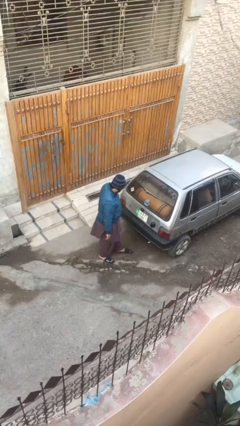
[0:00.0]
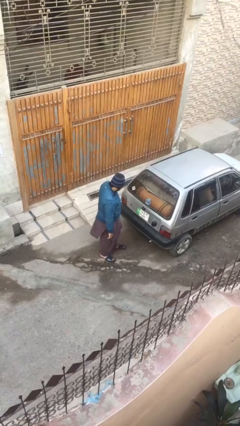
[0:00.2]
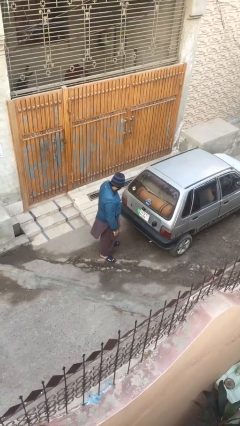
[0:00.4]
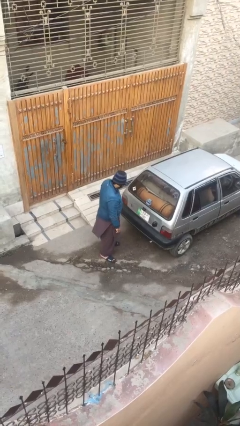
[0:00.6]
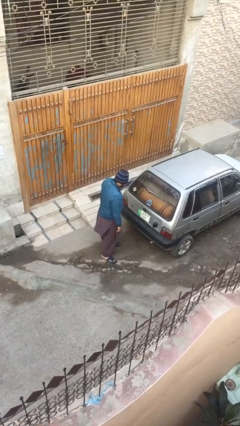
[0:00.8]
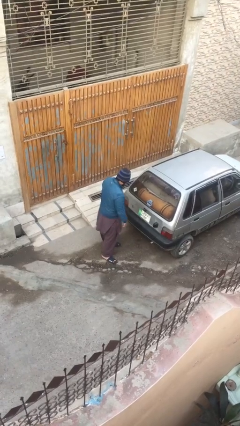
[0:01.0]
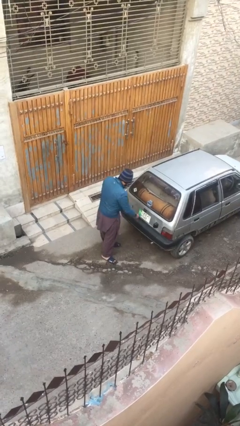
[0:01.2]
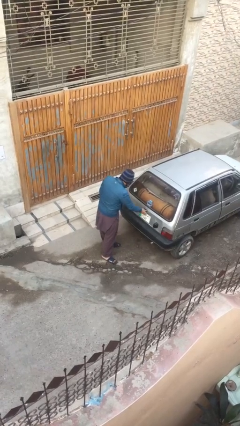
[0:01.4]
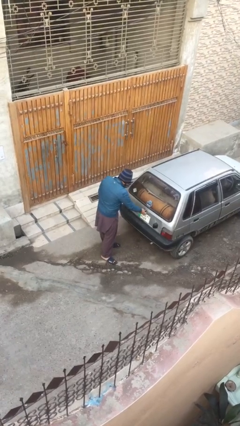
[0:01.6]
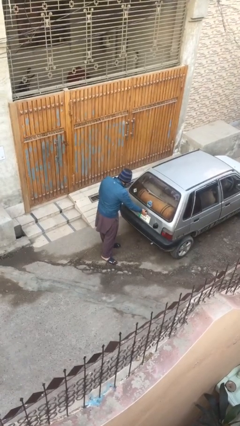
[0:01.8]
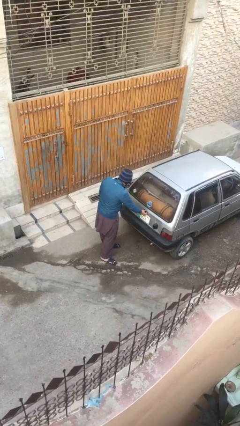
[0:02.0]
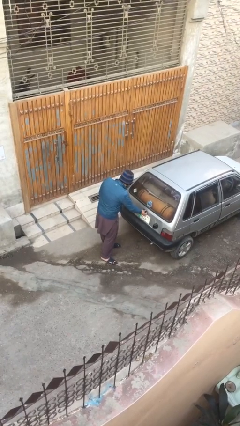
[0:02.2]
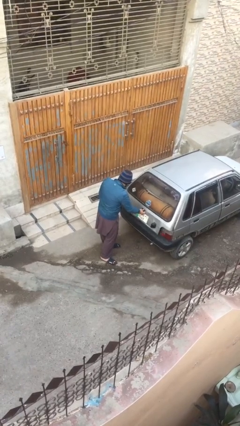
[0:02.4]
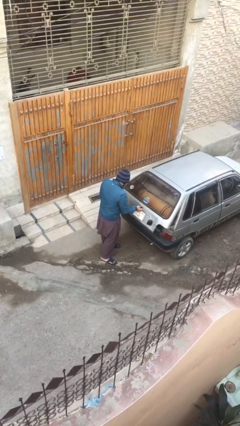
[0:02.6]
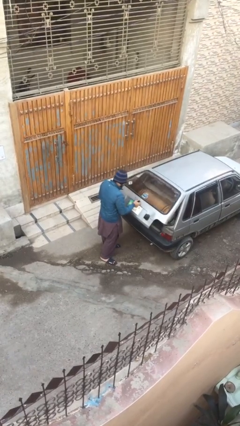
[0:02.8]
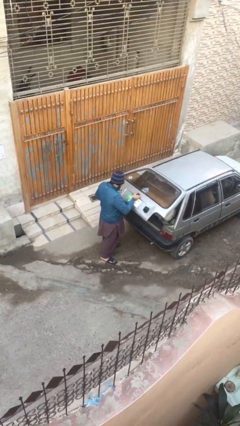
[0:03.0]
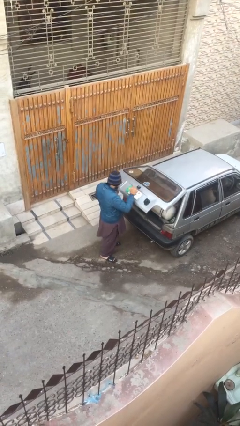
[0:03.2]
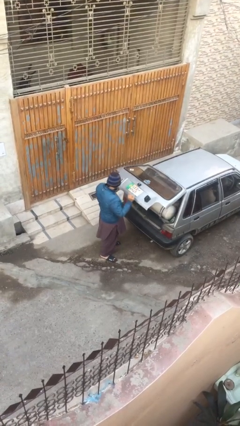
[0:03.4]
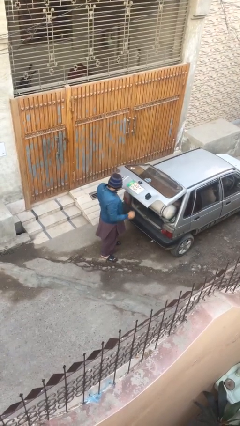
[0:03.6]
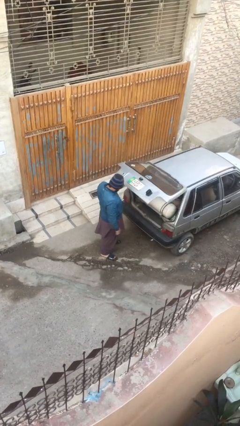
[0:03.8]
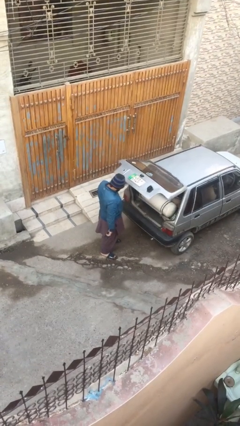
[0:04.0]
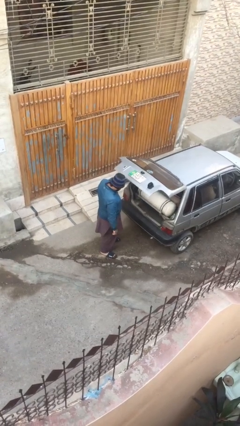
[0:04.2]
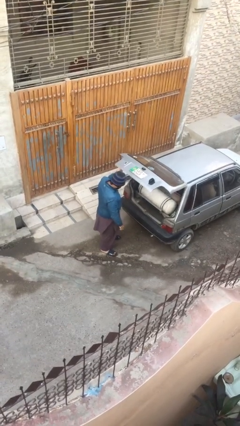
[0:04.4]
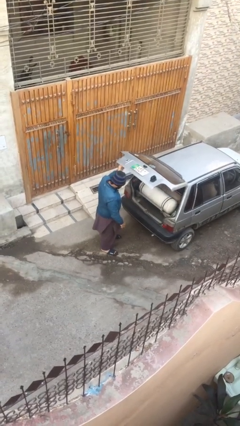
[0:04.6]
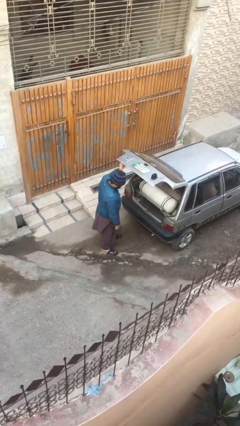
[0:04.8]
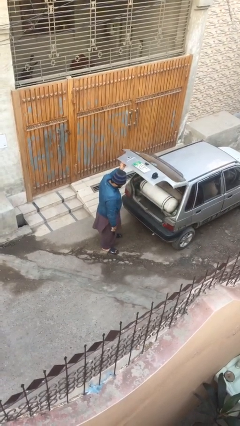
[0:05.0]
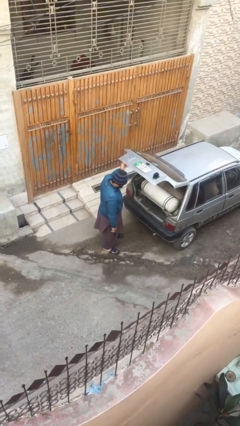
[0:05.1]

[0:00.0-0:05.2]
person opens car trunk

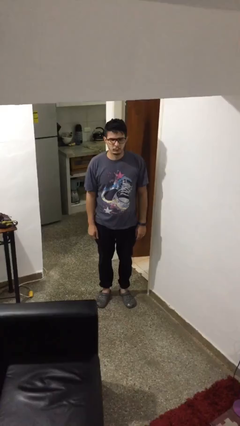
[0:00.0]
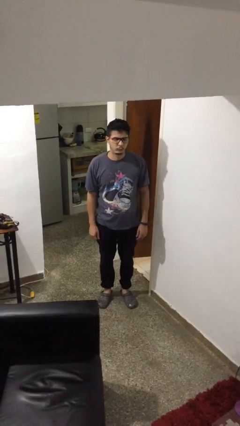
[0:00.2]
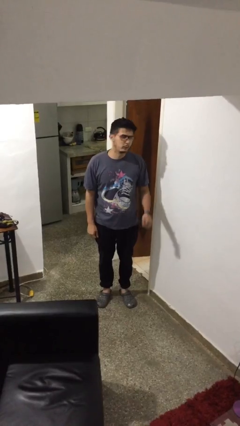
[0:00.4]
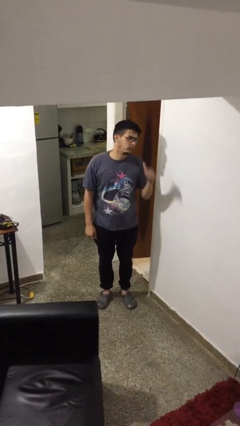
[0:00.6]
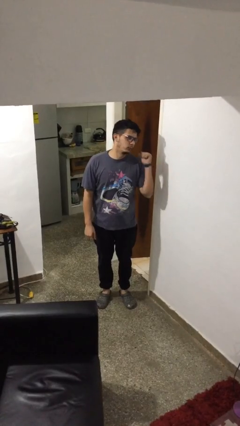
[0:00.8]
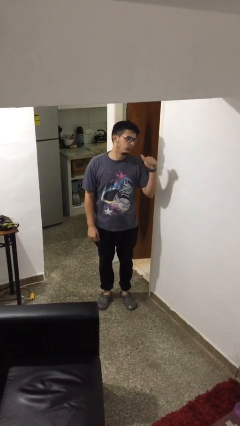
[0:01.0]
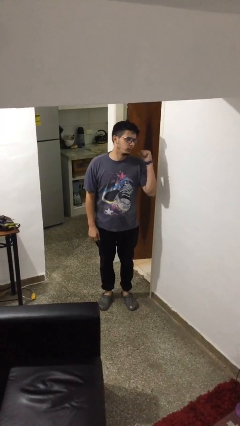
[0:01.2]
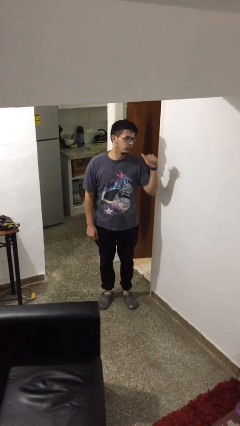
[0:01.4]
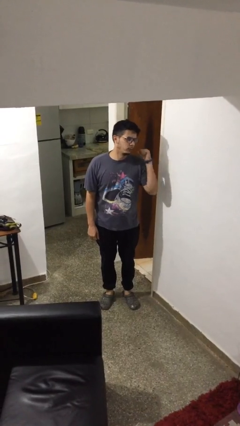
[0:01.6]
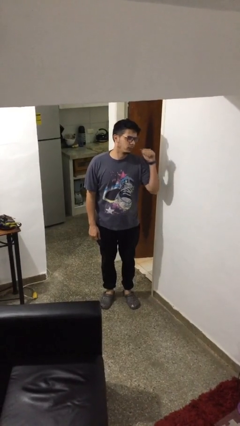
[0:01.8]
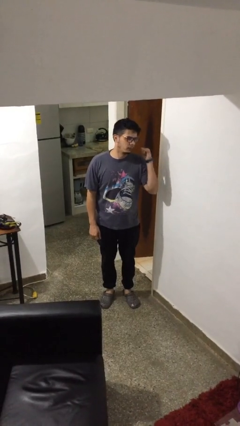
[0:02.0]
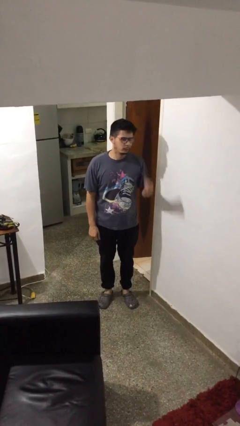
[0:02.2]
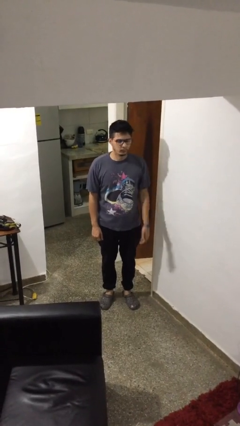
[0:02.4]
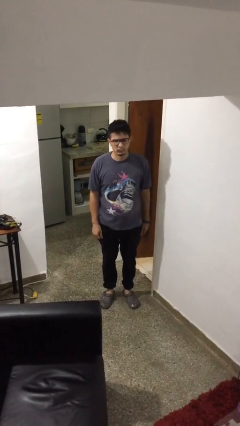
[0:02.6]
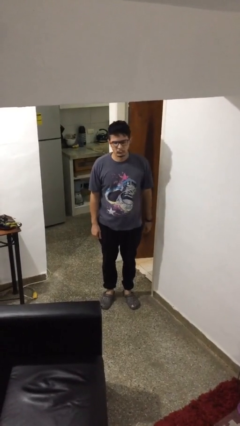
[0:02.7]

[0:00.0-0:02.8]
person gestures behind me

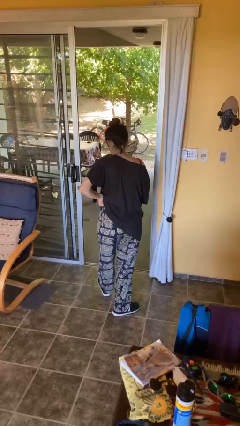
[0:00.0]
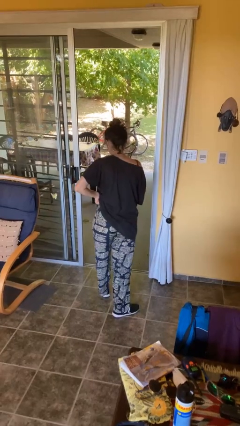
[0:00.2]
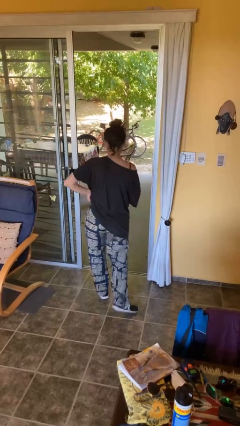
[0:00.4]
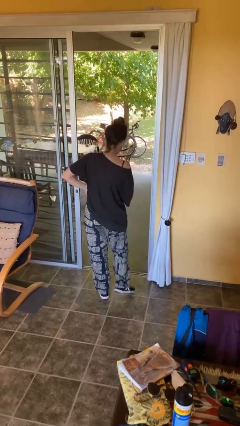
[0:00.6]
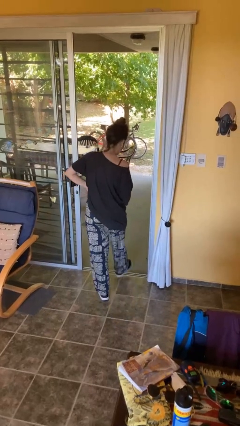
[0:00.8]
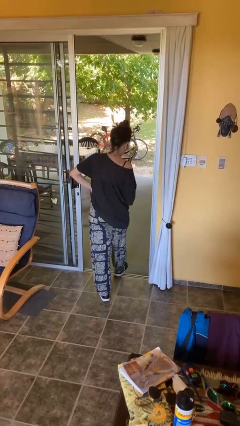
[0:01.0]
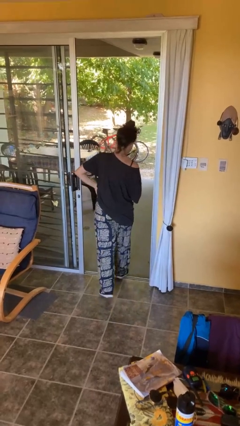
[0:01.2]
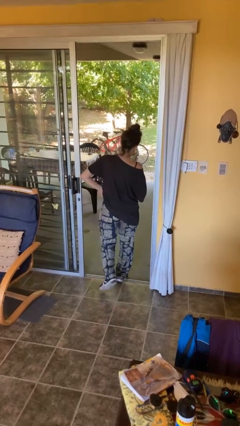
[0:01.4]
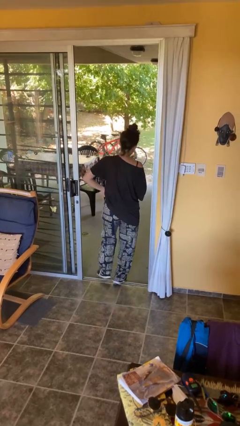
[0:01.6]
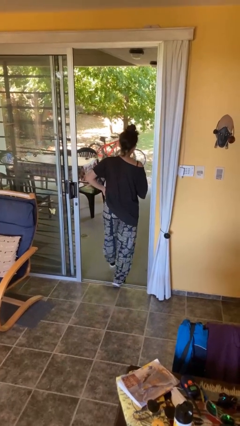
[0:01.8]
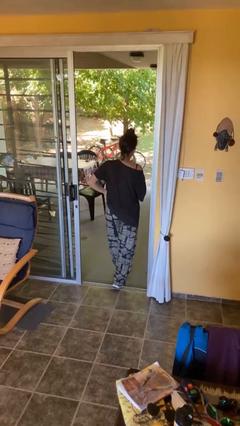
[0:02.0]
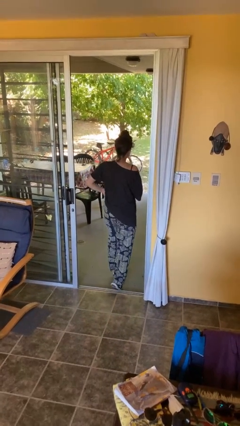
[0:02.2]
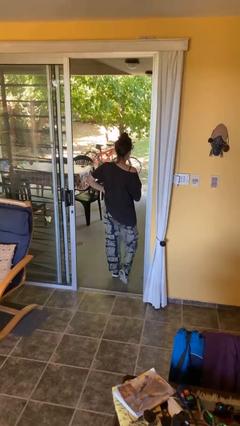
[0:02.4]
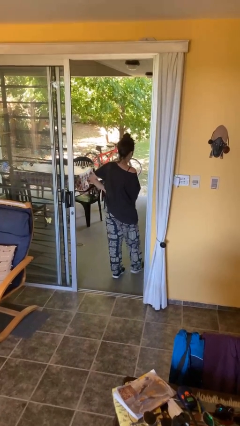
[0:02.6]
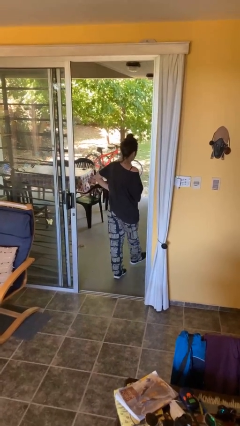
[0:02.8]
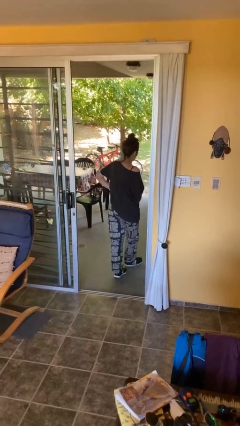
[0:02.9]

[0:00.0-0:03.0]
person exits scene through structure

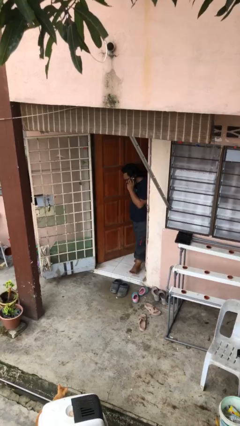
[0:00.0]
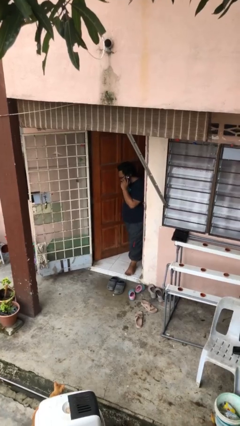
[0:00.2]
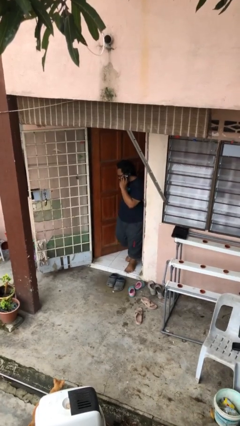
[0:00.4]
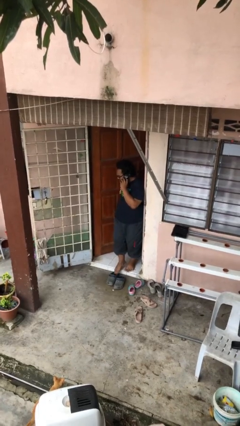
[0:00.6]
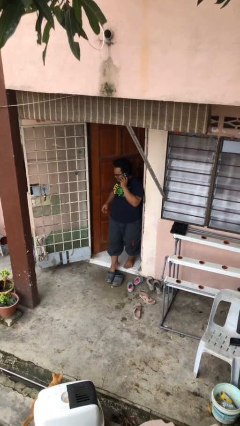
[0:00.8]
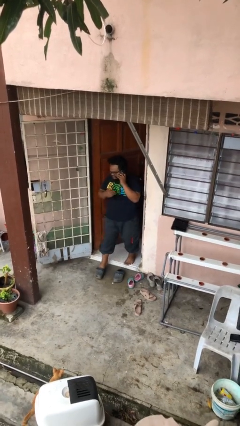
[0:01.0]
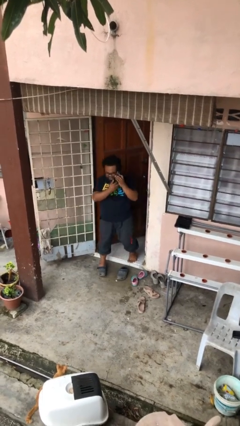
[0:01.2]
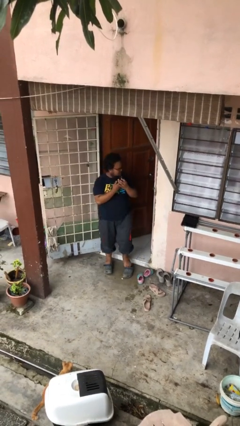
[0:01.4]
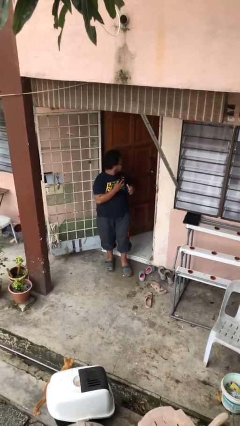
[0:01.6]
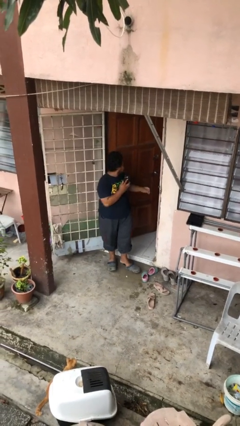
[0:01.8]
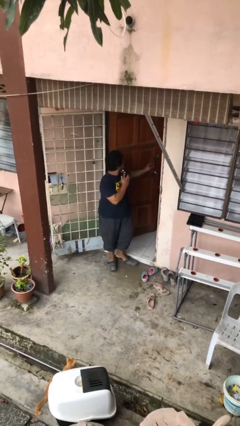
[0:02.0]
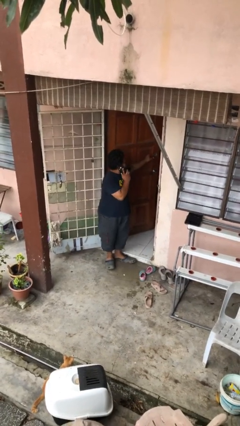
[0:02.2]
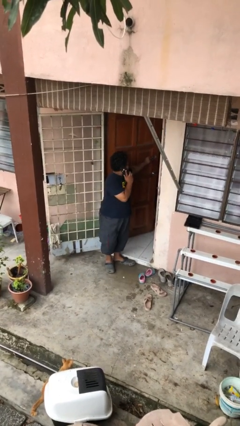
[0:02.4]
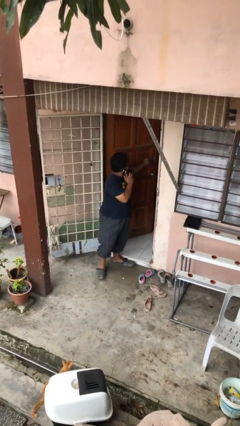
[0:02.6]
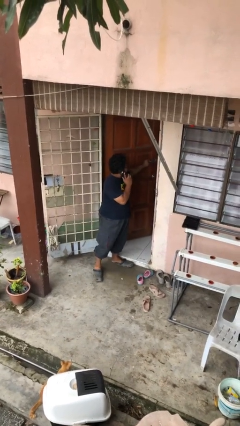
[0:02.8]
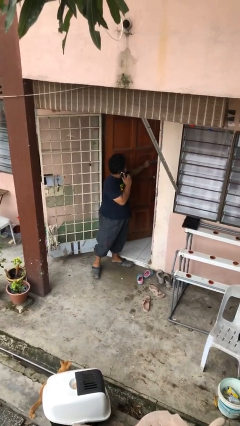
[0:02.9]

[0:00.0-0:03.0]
person enters scene through structure

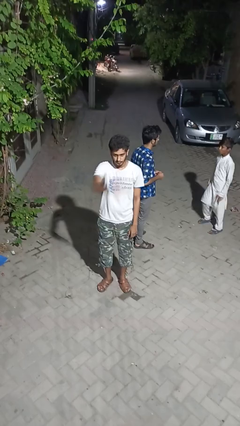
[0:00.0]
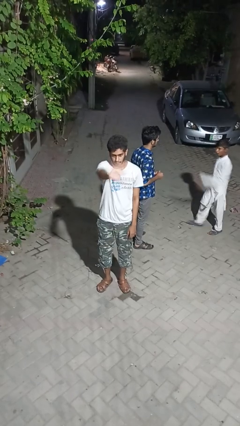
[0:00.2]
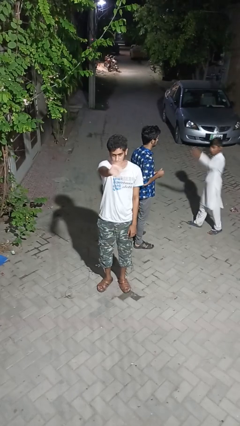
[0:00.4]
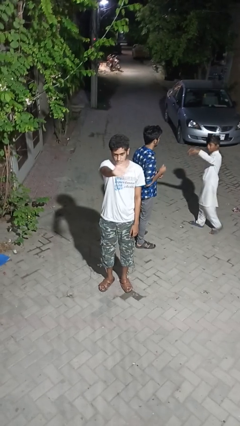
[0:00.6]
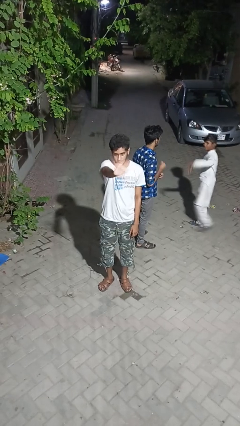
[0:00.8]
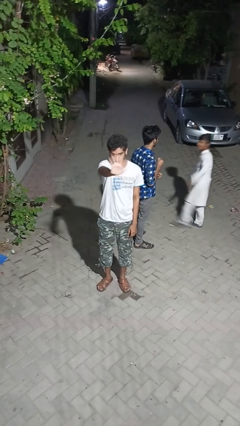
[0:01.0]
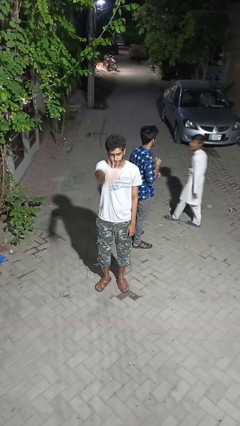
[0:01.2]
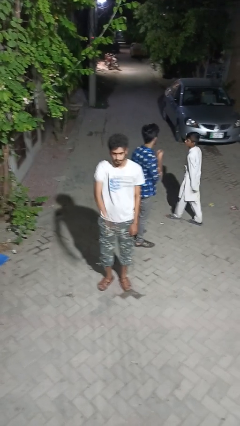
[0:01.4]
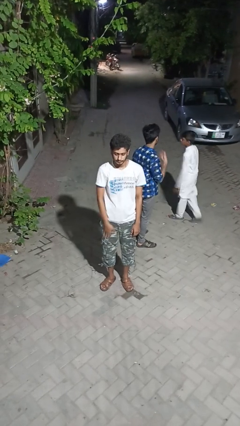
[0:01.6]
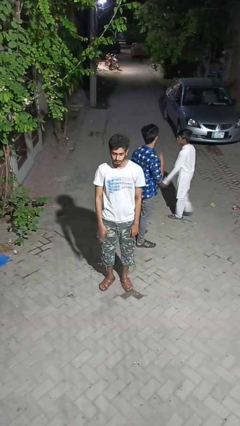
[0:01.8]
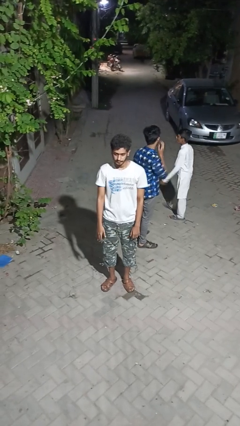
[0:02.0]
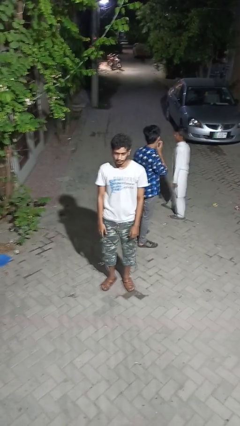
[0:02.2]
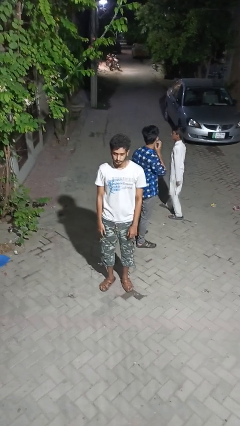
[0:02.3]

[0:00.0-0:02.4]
person waves at person

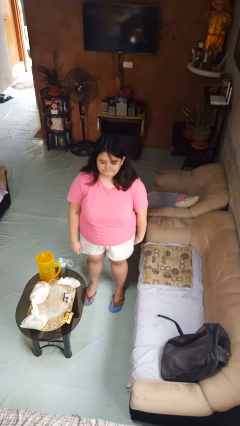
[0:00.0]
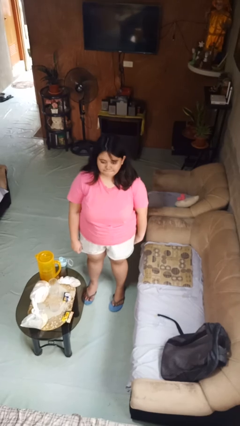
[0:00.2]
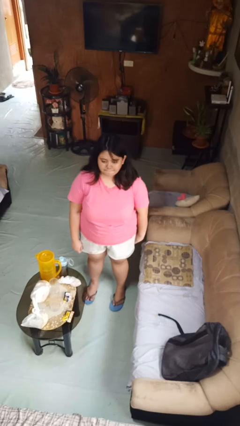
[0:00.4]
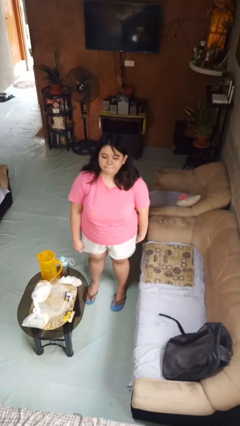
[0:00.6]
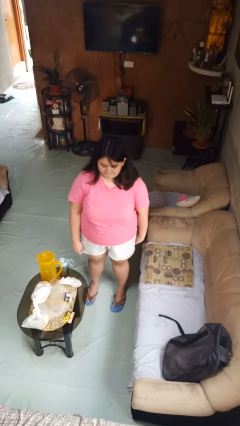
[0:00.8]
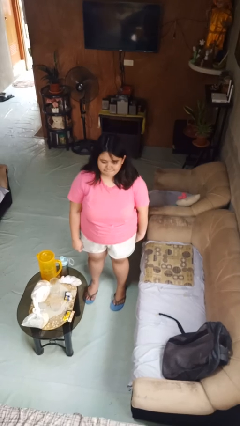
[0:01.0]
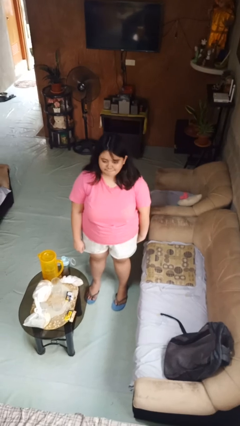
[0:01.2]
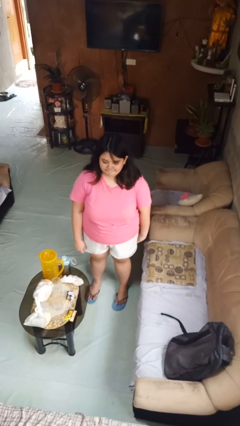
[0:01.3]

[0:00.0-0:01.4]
person nods head
